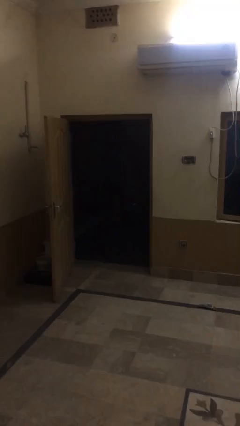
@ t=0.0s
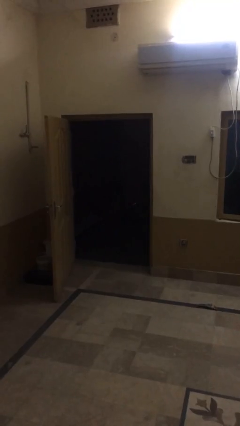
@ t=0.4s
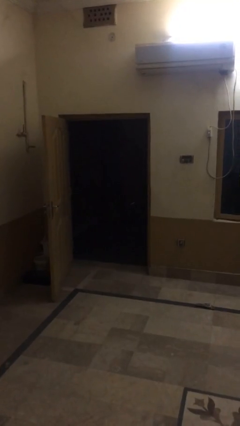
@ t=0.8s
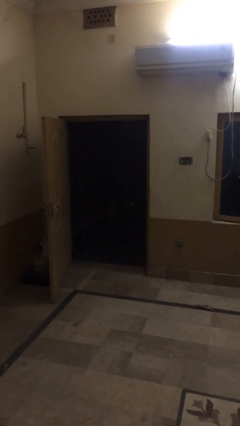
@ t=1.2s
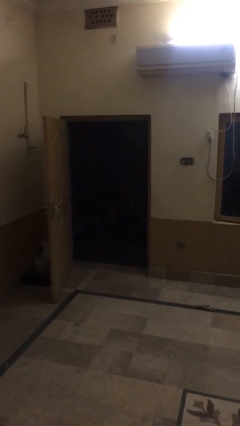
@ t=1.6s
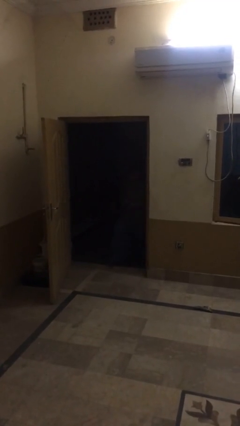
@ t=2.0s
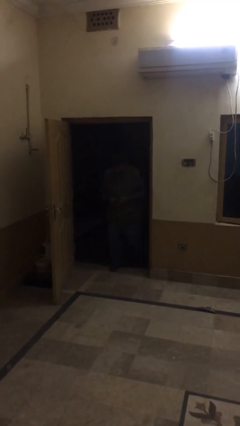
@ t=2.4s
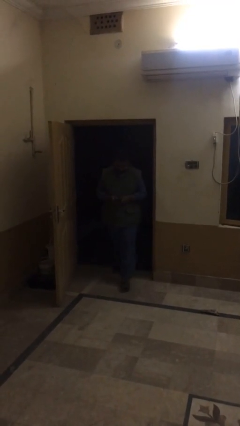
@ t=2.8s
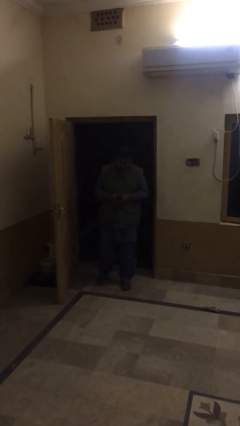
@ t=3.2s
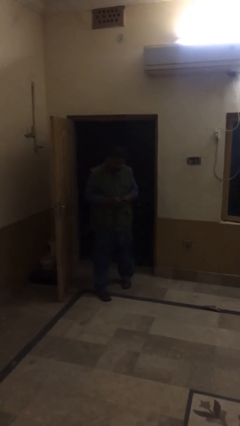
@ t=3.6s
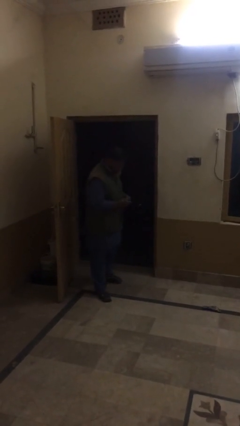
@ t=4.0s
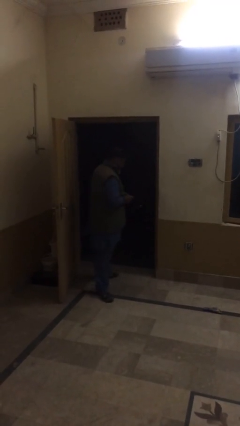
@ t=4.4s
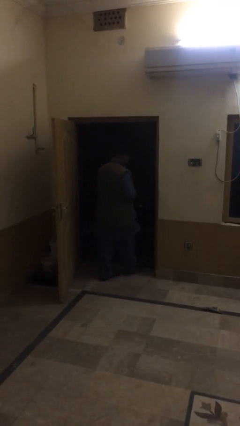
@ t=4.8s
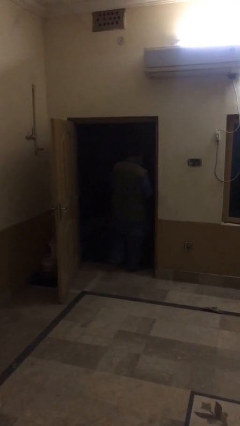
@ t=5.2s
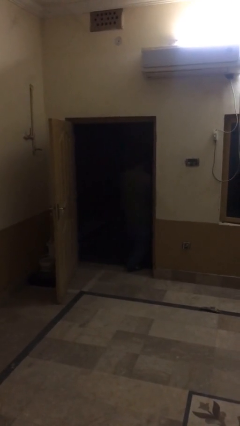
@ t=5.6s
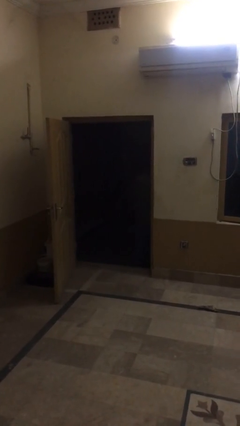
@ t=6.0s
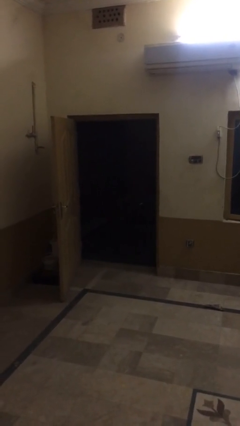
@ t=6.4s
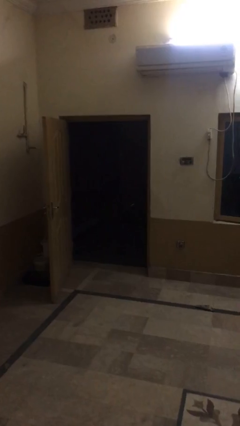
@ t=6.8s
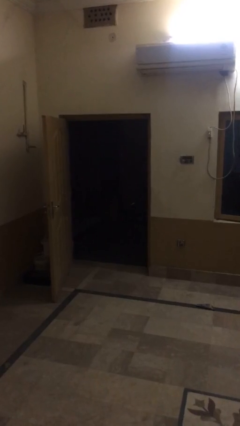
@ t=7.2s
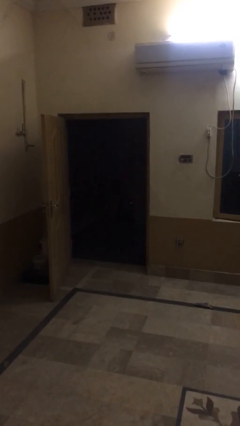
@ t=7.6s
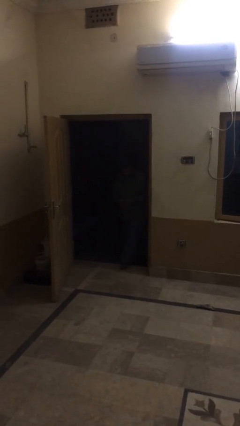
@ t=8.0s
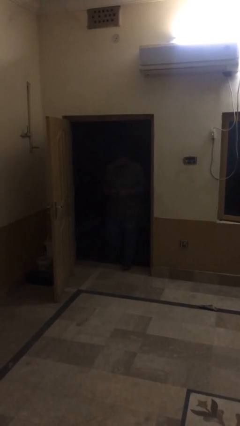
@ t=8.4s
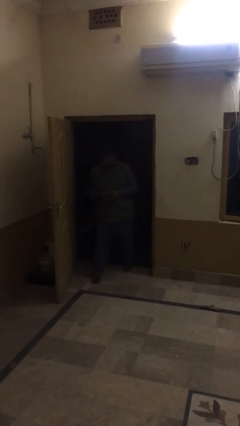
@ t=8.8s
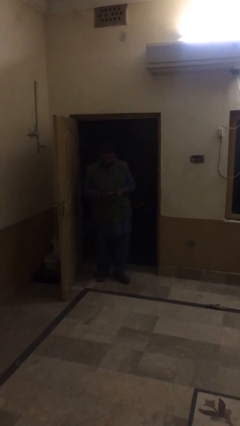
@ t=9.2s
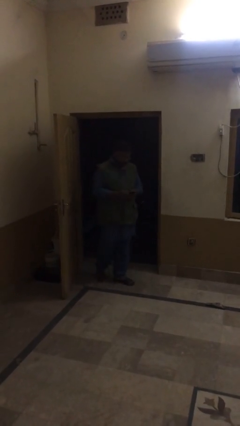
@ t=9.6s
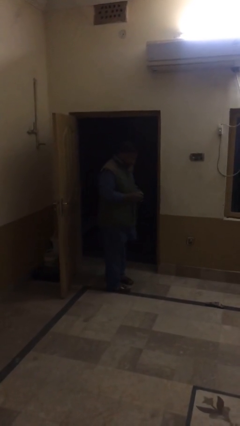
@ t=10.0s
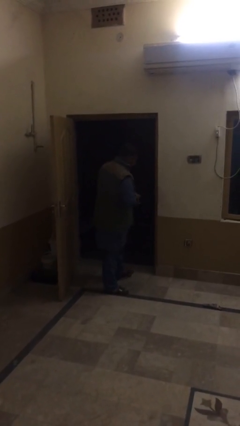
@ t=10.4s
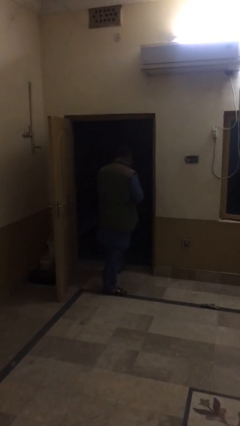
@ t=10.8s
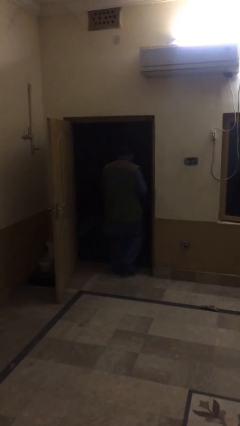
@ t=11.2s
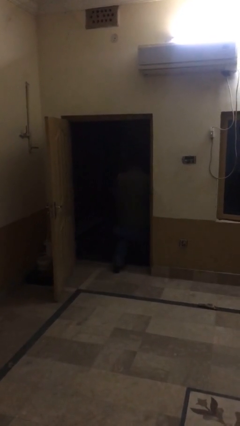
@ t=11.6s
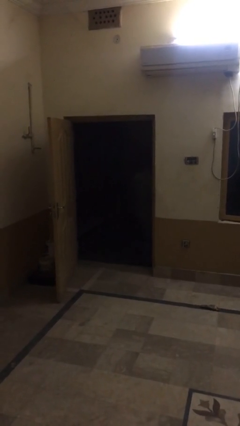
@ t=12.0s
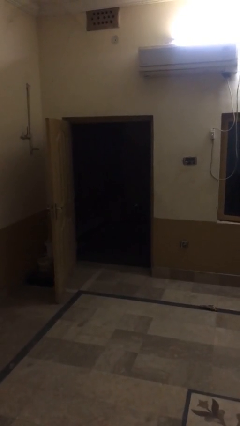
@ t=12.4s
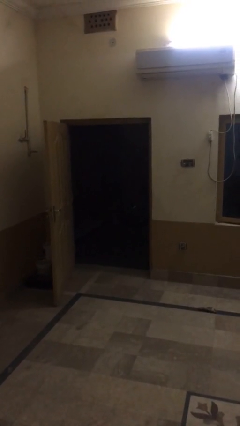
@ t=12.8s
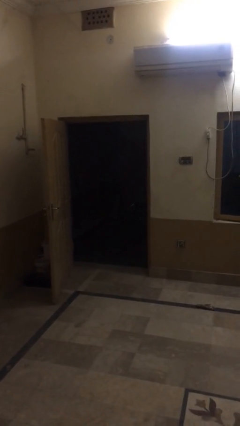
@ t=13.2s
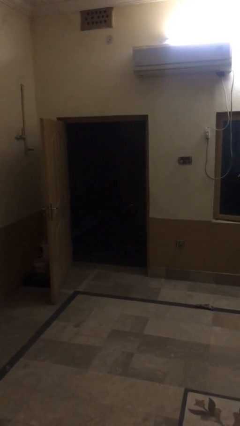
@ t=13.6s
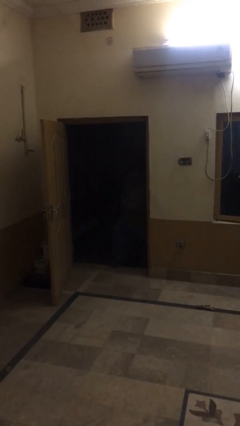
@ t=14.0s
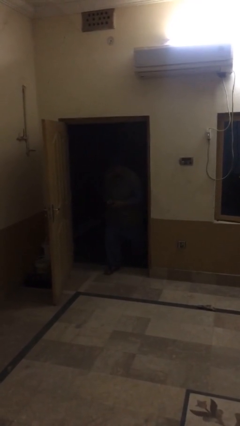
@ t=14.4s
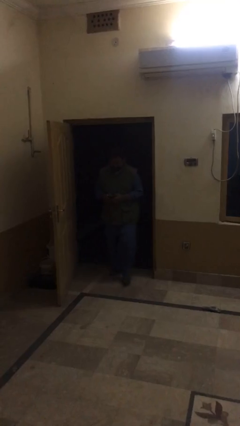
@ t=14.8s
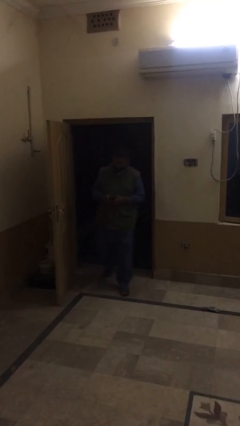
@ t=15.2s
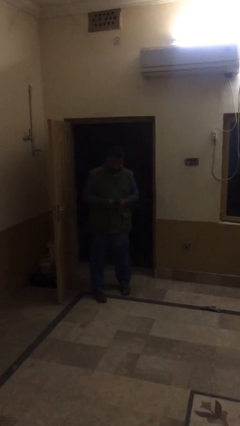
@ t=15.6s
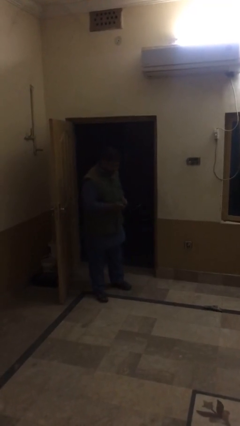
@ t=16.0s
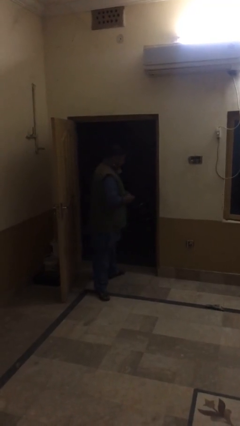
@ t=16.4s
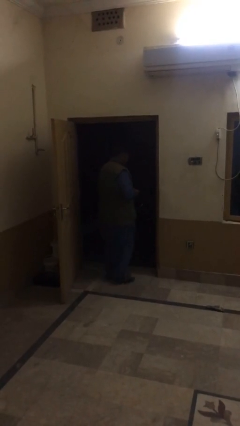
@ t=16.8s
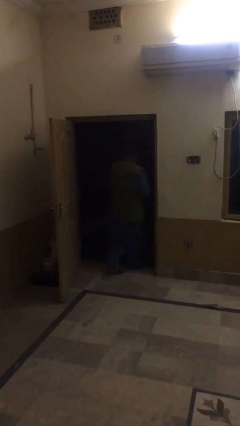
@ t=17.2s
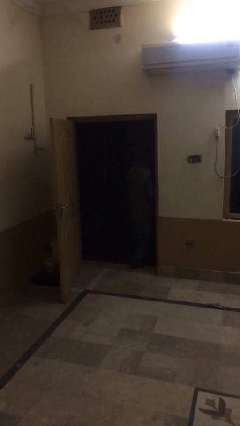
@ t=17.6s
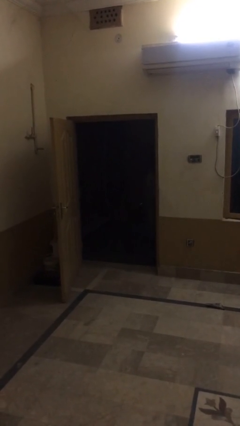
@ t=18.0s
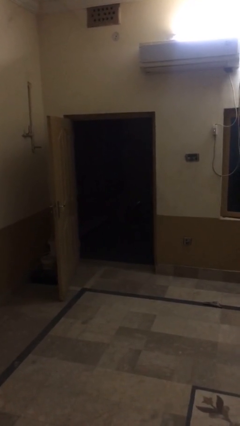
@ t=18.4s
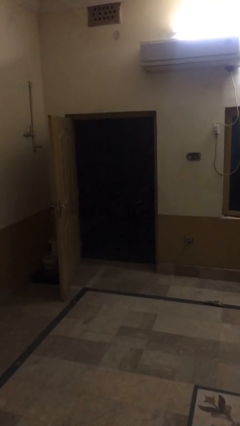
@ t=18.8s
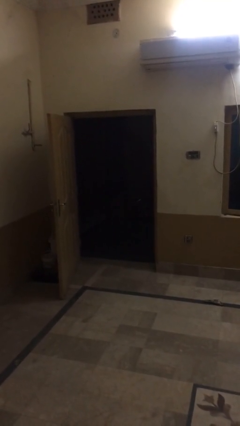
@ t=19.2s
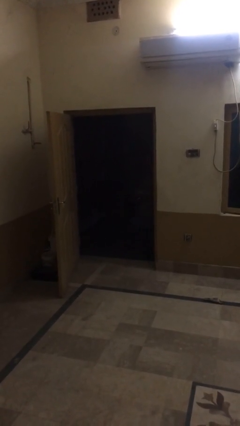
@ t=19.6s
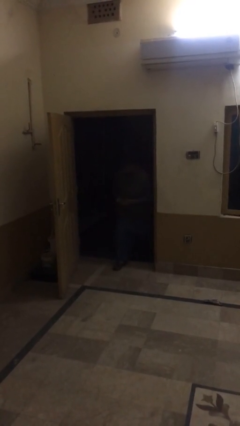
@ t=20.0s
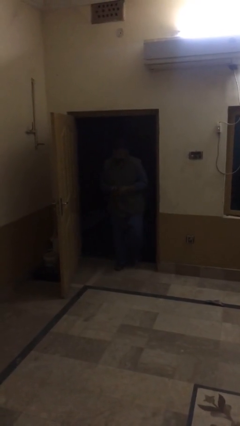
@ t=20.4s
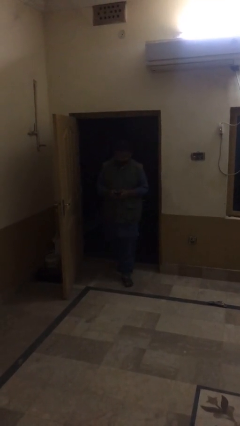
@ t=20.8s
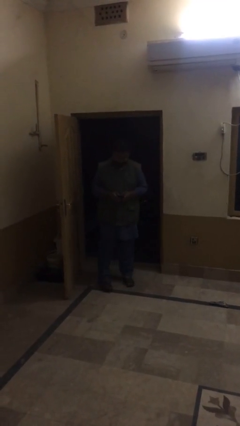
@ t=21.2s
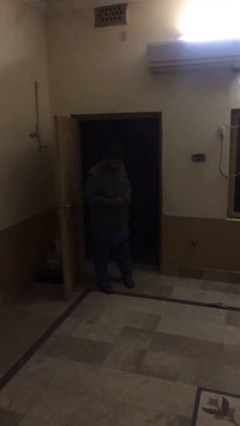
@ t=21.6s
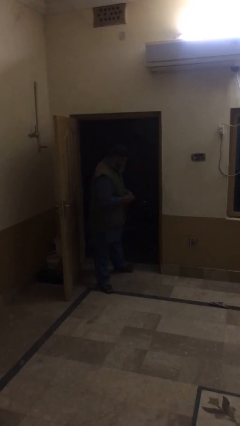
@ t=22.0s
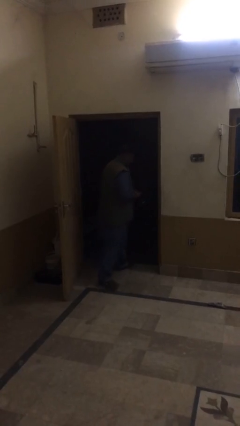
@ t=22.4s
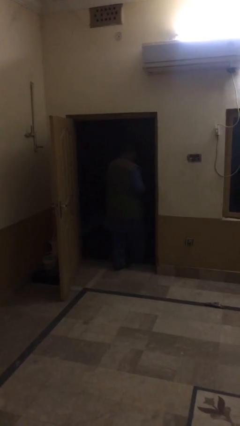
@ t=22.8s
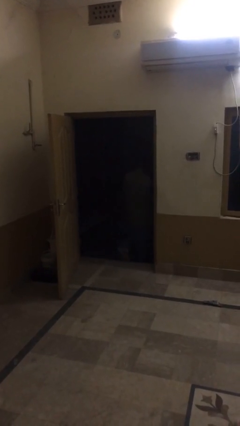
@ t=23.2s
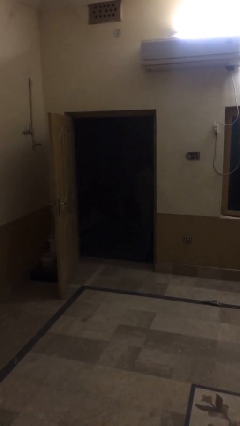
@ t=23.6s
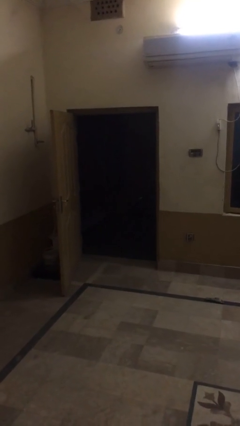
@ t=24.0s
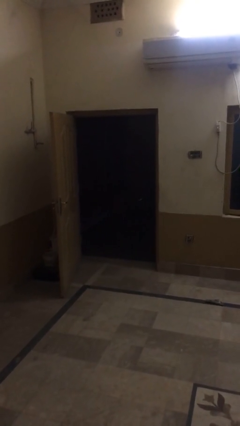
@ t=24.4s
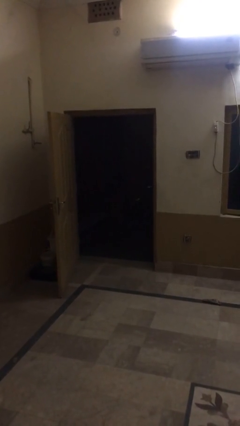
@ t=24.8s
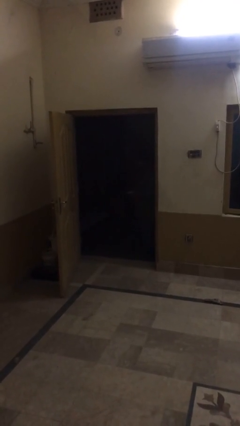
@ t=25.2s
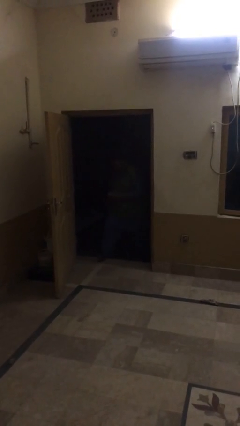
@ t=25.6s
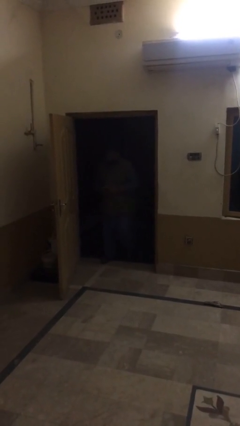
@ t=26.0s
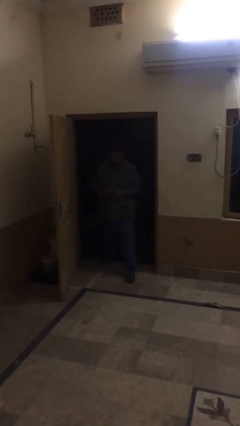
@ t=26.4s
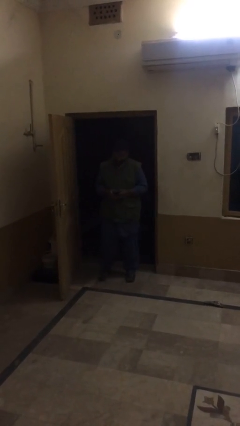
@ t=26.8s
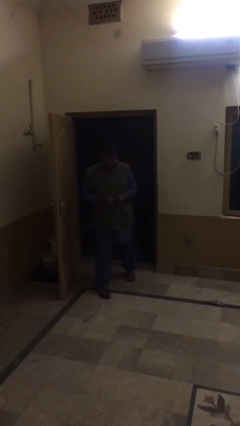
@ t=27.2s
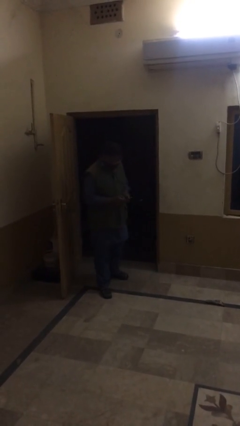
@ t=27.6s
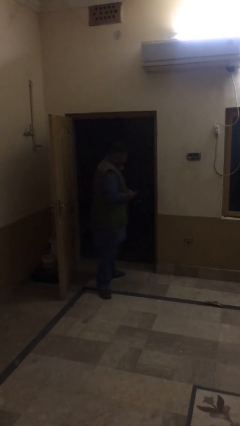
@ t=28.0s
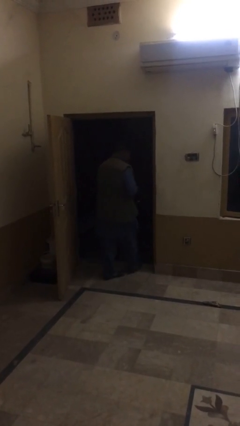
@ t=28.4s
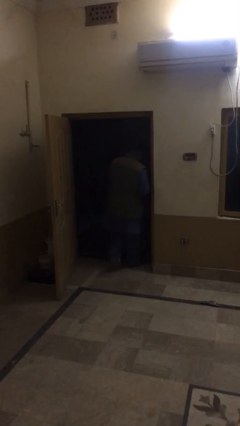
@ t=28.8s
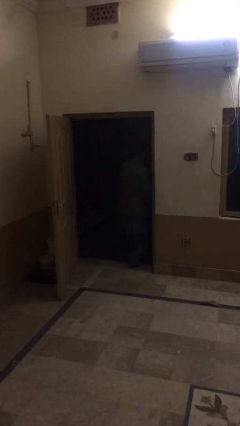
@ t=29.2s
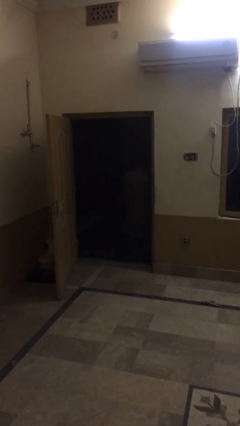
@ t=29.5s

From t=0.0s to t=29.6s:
person texts on phone

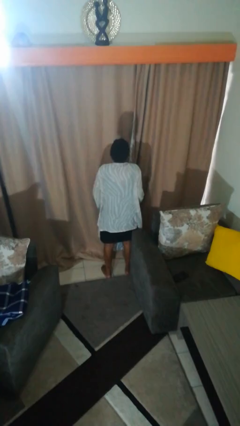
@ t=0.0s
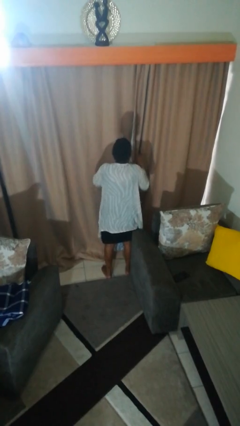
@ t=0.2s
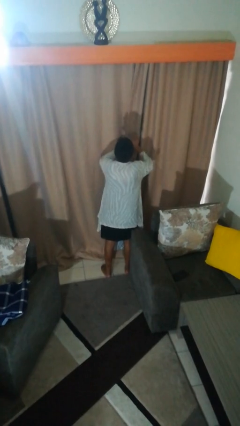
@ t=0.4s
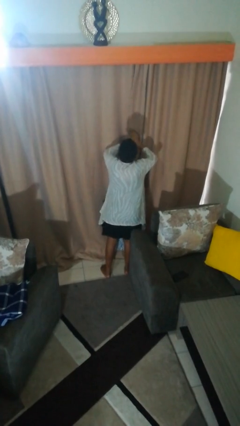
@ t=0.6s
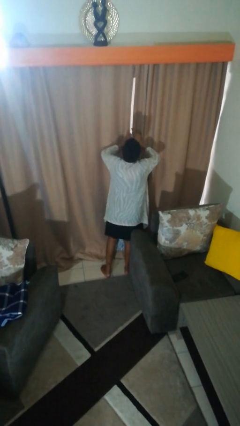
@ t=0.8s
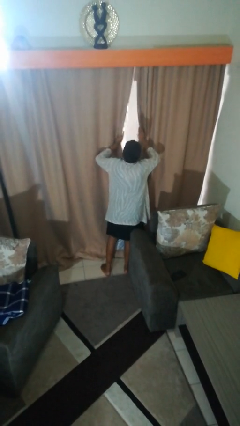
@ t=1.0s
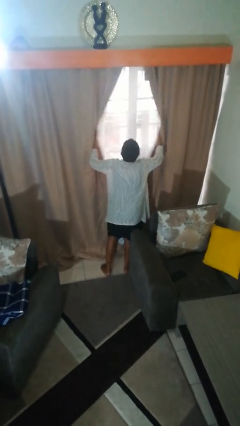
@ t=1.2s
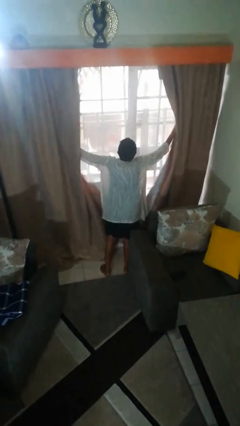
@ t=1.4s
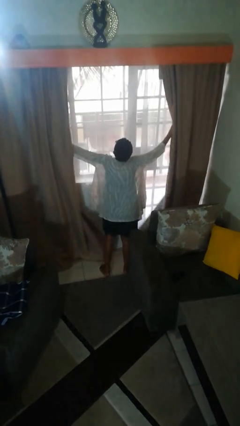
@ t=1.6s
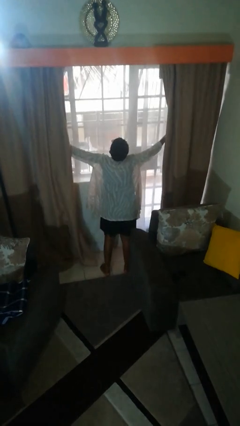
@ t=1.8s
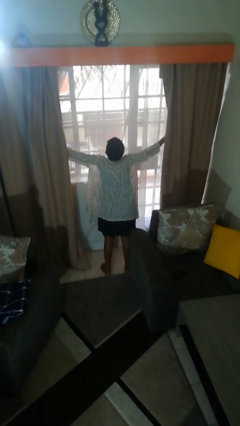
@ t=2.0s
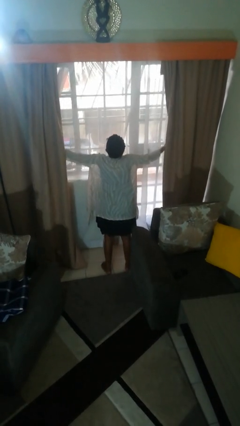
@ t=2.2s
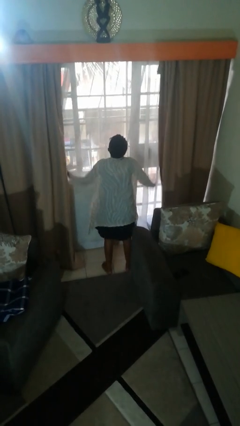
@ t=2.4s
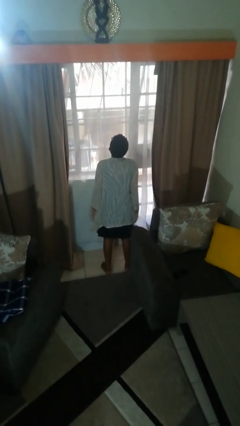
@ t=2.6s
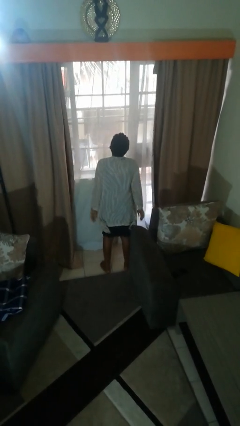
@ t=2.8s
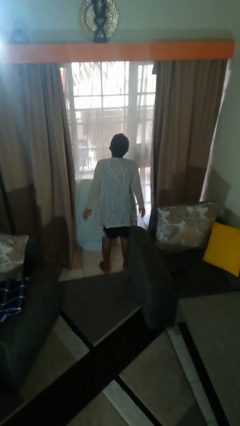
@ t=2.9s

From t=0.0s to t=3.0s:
person opens curtains

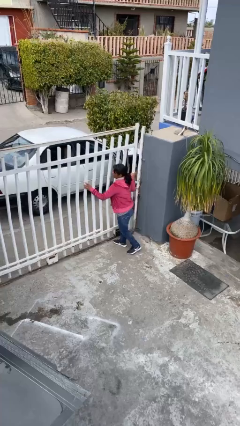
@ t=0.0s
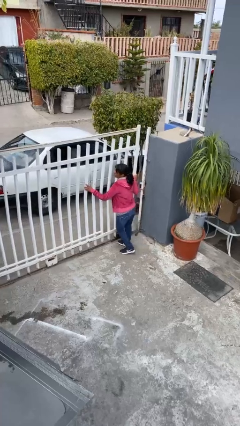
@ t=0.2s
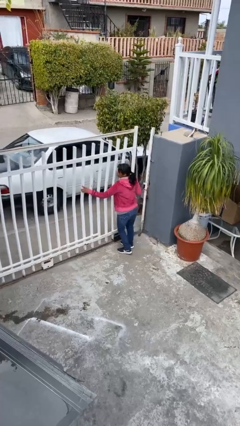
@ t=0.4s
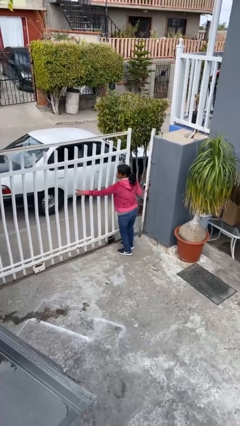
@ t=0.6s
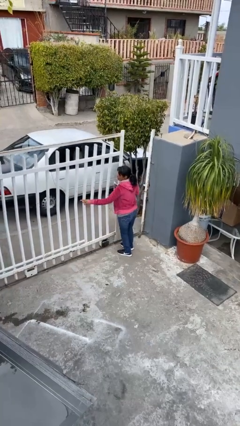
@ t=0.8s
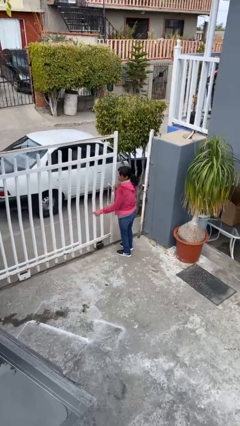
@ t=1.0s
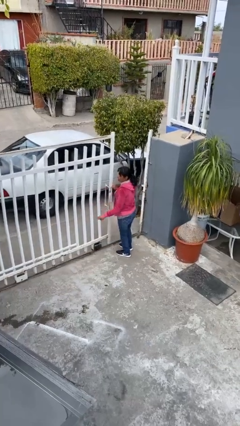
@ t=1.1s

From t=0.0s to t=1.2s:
person opens facility door
